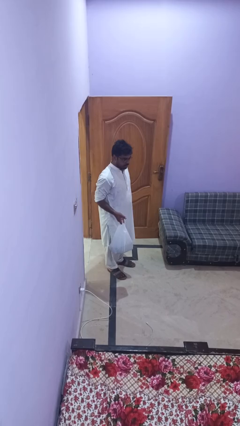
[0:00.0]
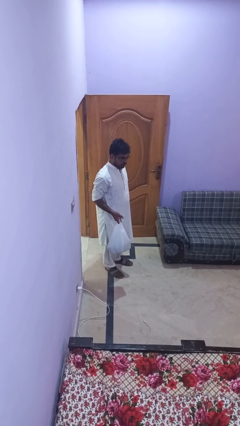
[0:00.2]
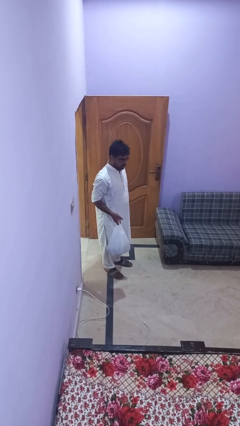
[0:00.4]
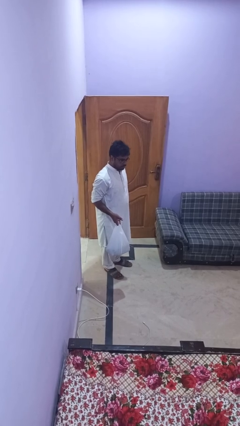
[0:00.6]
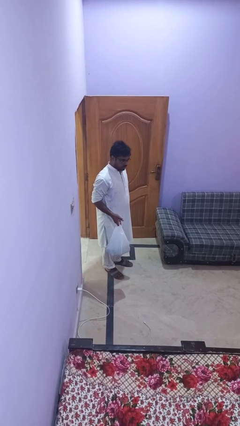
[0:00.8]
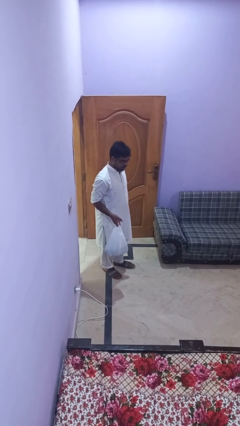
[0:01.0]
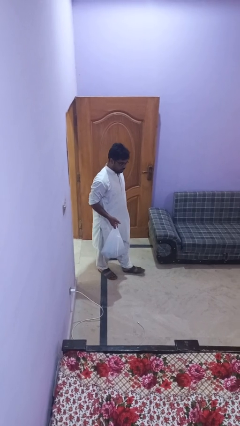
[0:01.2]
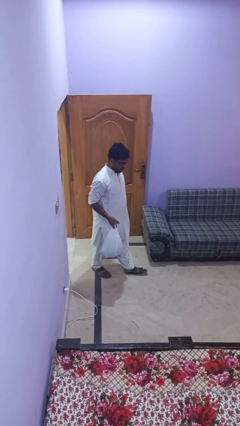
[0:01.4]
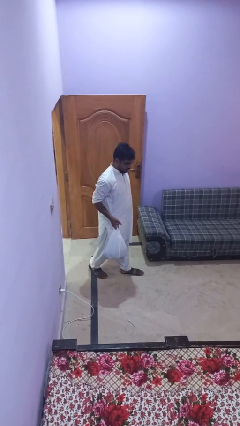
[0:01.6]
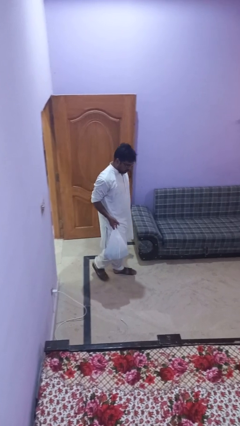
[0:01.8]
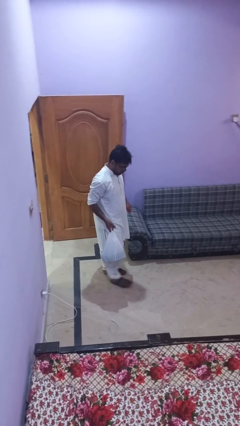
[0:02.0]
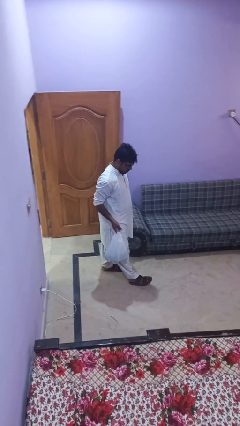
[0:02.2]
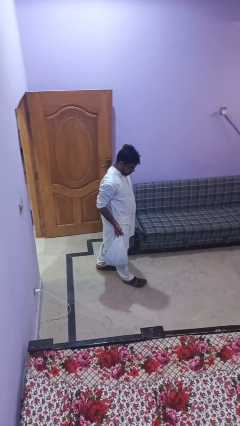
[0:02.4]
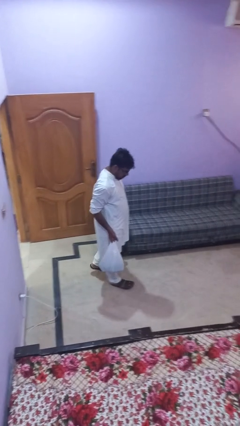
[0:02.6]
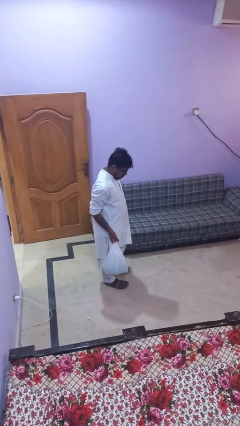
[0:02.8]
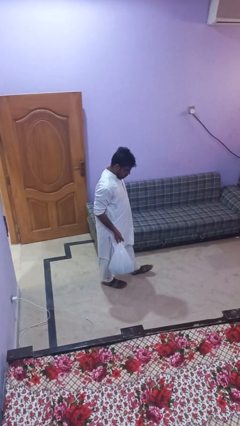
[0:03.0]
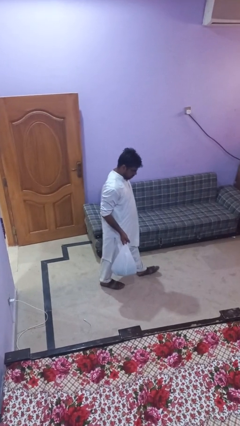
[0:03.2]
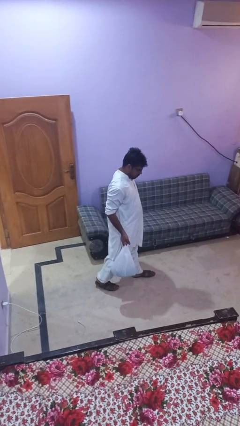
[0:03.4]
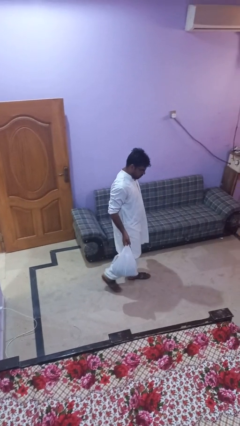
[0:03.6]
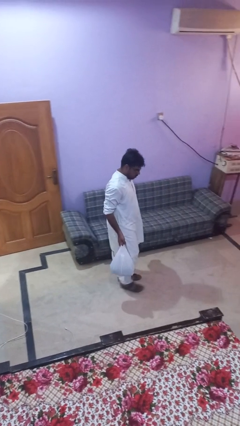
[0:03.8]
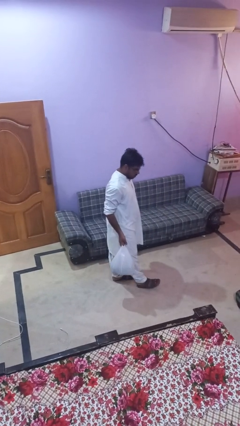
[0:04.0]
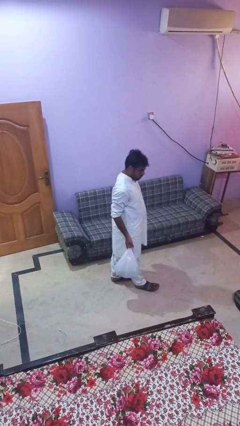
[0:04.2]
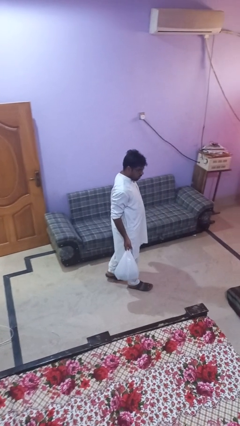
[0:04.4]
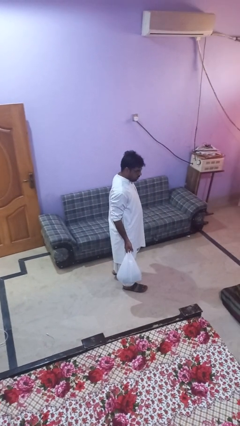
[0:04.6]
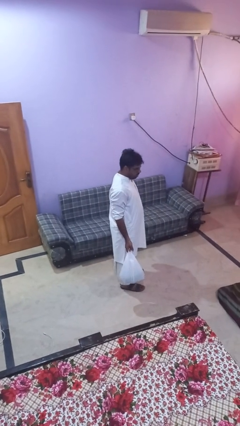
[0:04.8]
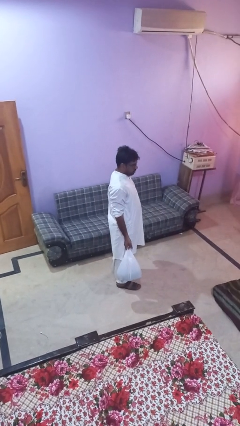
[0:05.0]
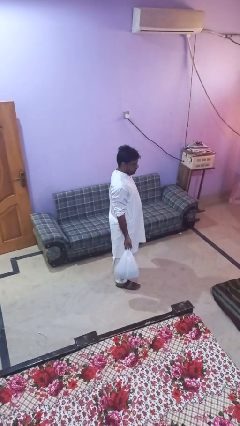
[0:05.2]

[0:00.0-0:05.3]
person carries groceries

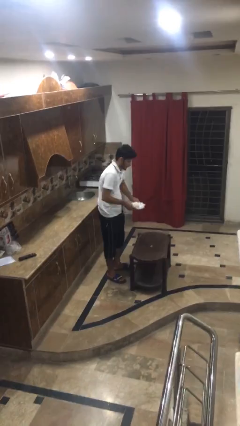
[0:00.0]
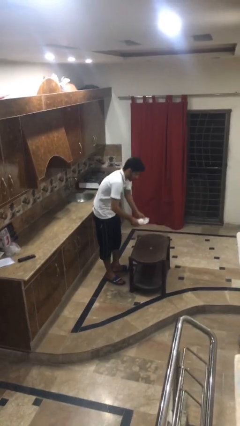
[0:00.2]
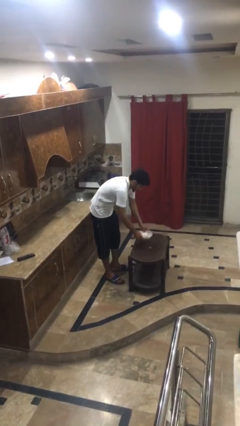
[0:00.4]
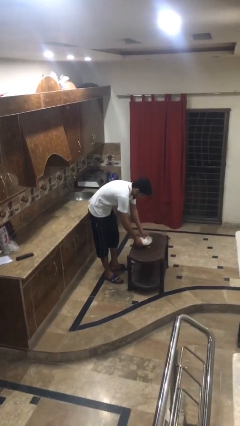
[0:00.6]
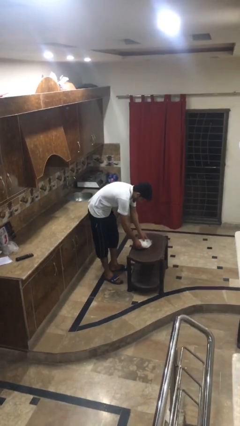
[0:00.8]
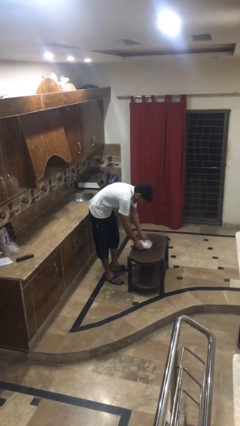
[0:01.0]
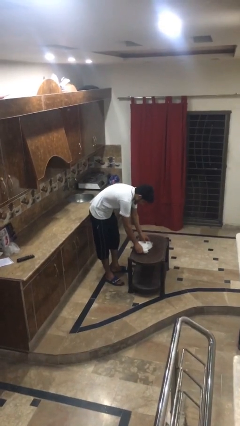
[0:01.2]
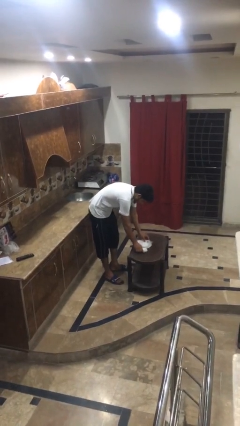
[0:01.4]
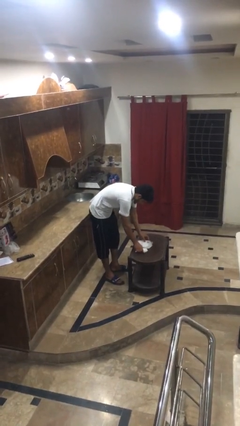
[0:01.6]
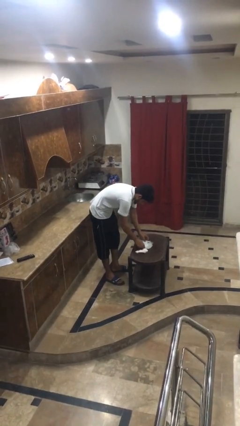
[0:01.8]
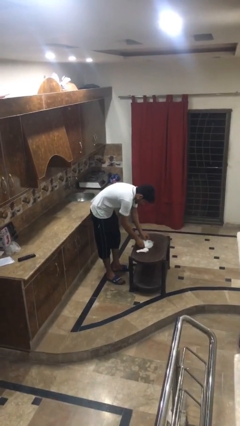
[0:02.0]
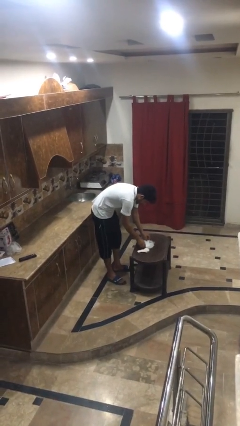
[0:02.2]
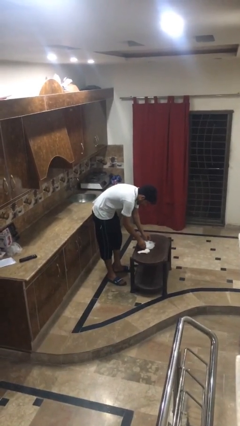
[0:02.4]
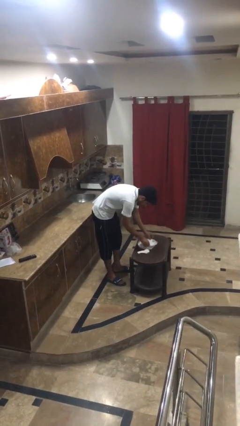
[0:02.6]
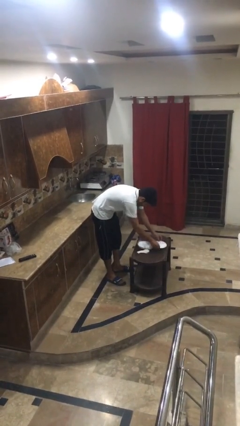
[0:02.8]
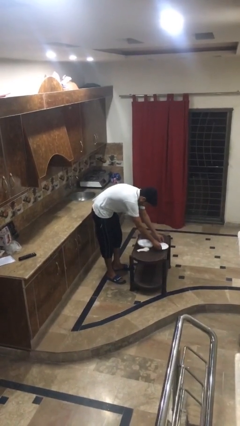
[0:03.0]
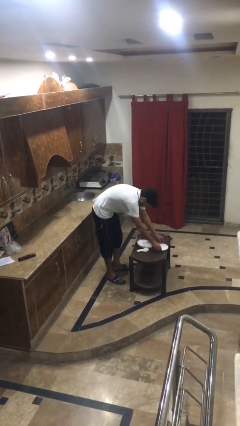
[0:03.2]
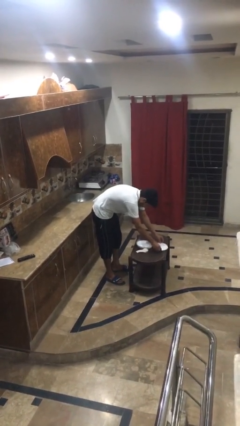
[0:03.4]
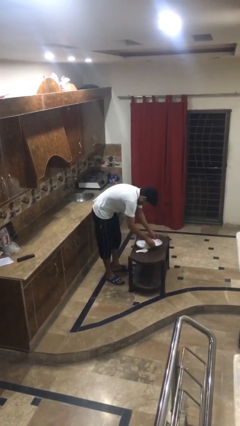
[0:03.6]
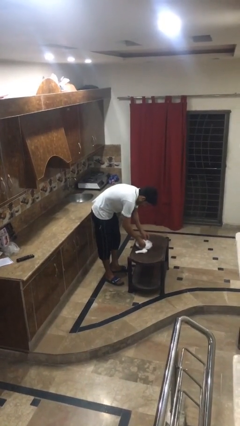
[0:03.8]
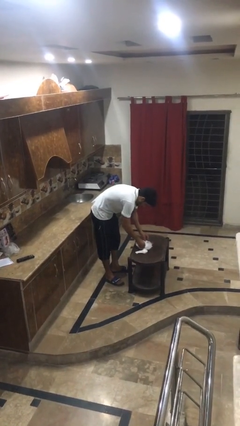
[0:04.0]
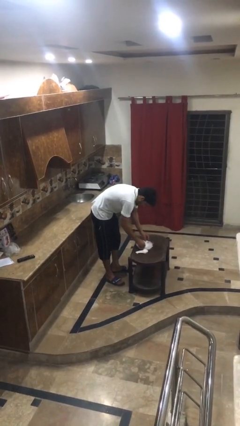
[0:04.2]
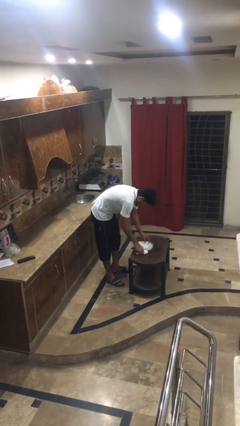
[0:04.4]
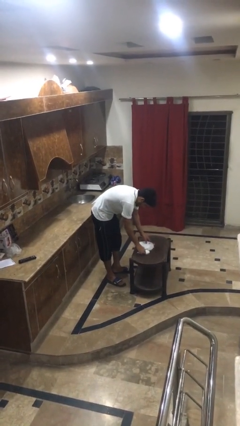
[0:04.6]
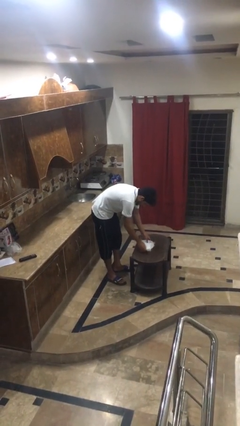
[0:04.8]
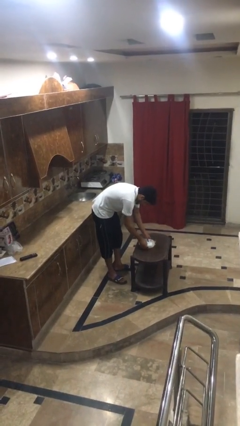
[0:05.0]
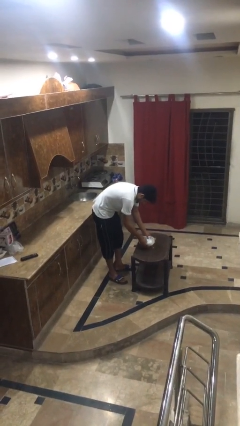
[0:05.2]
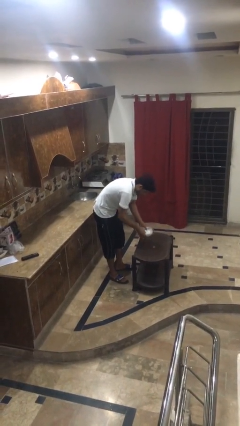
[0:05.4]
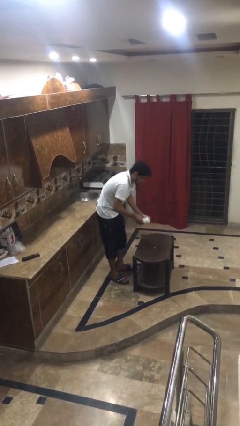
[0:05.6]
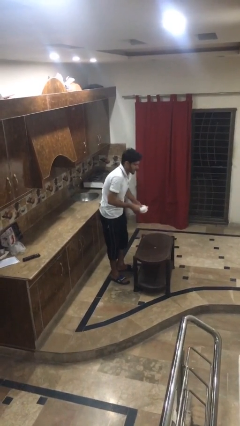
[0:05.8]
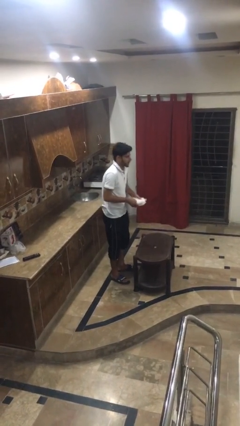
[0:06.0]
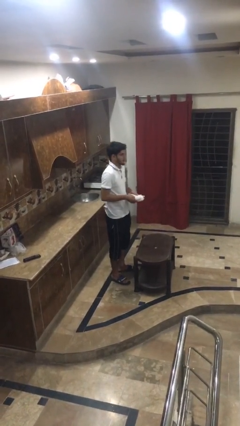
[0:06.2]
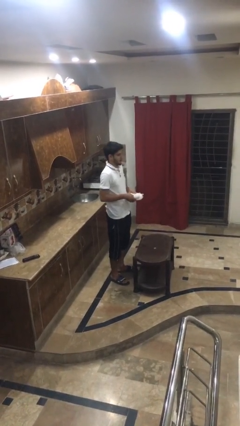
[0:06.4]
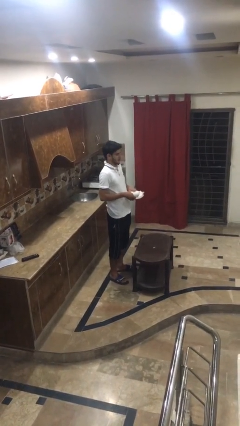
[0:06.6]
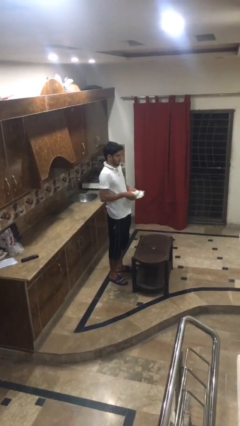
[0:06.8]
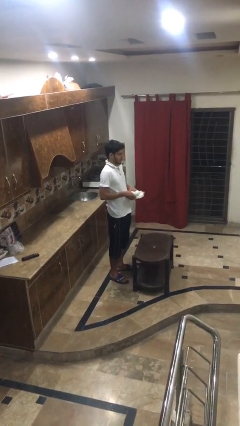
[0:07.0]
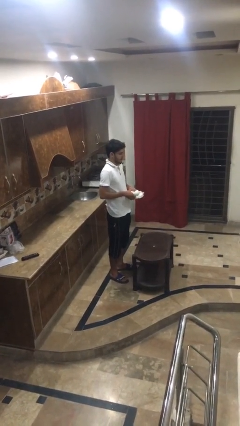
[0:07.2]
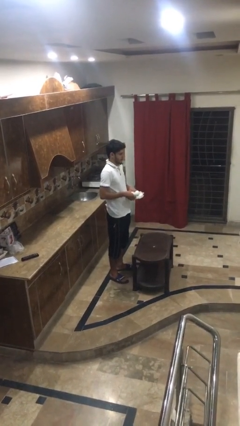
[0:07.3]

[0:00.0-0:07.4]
person sets table

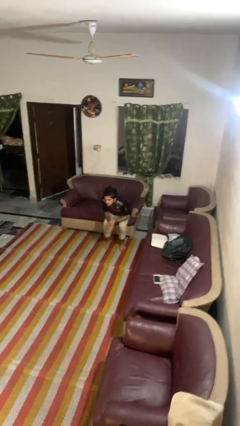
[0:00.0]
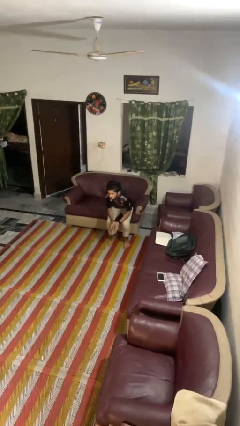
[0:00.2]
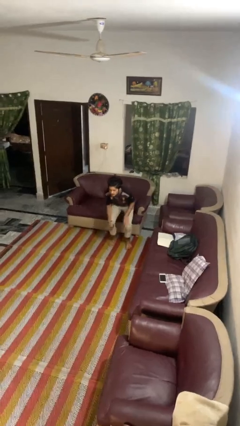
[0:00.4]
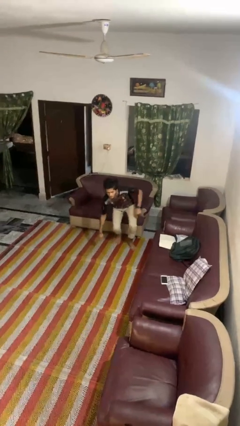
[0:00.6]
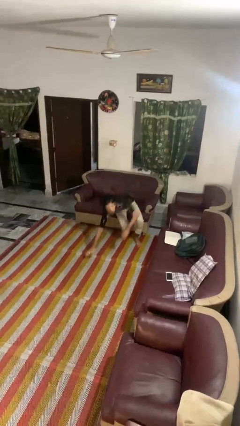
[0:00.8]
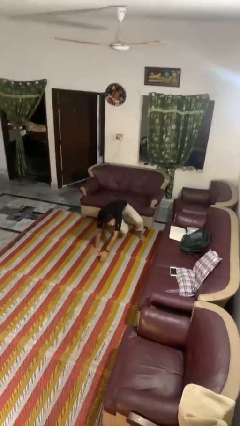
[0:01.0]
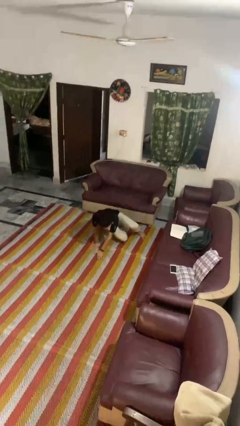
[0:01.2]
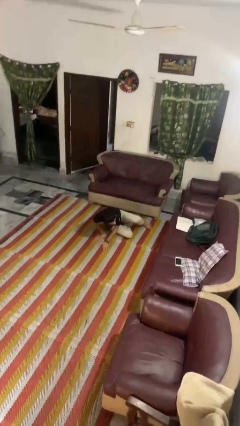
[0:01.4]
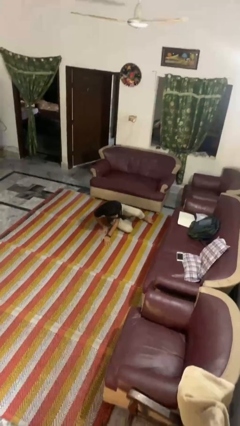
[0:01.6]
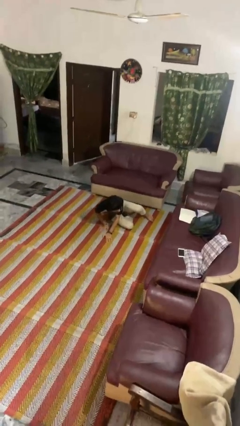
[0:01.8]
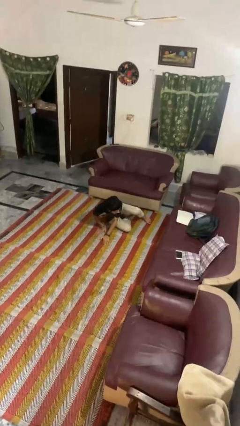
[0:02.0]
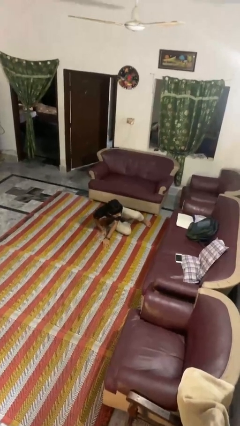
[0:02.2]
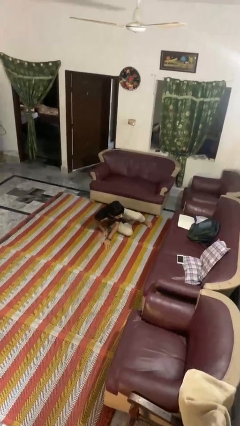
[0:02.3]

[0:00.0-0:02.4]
person falls from chair

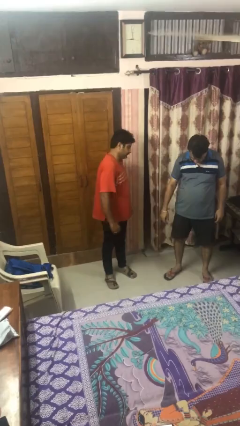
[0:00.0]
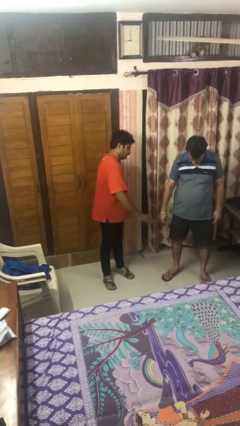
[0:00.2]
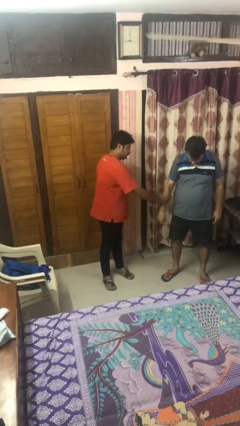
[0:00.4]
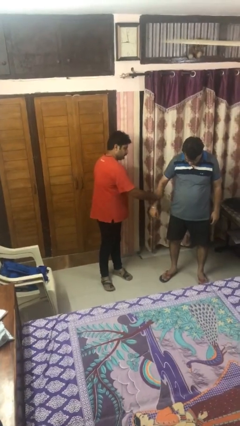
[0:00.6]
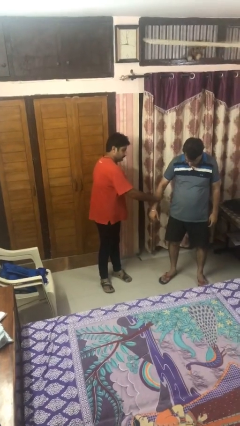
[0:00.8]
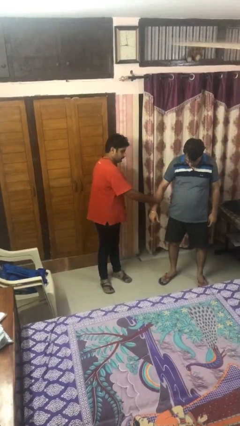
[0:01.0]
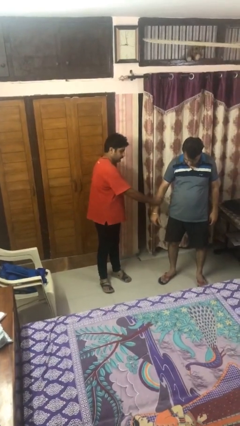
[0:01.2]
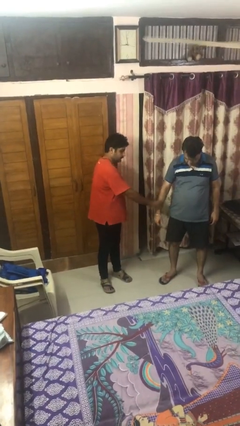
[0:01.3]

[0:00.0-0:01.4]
person grabs person by forearm

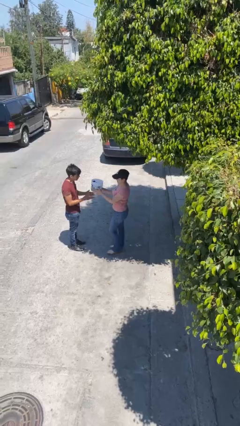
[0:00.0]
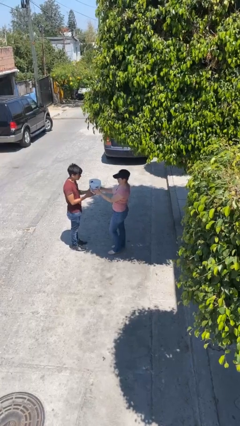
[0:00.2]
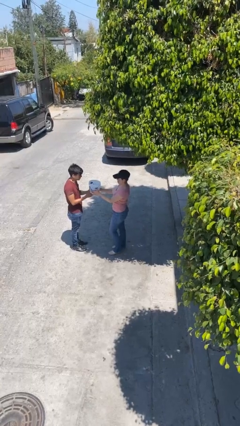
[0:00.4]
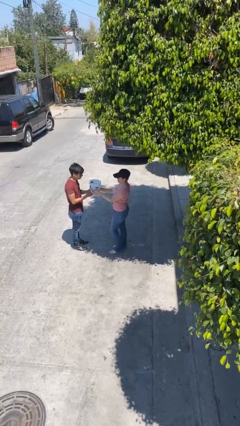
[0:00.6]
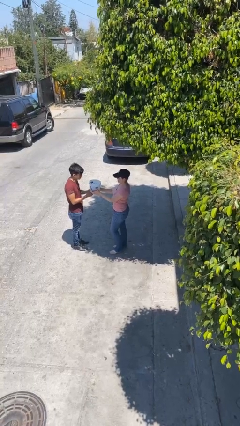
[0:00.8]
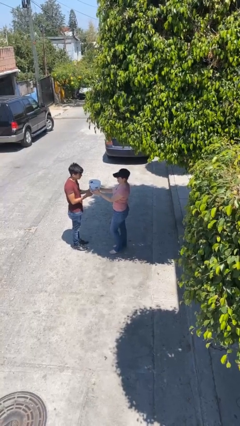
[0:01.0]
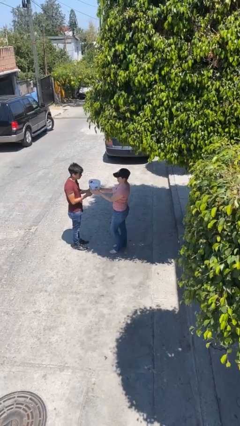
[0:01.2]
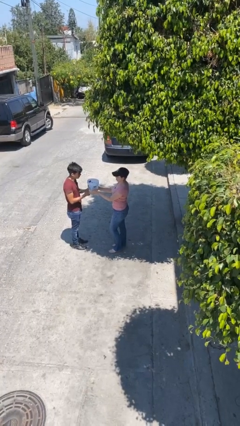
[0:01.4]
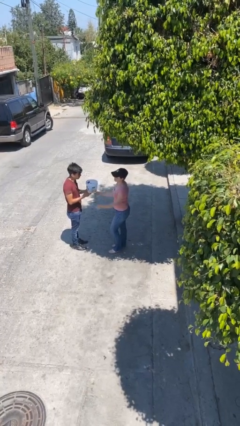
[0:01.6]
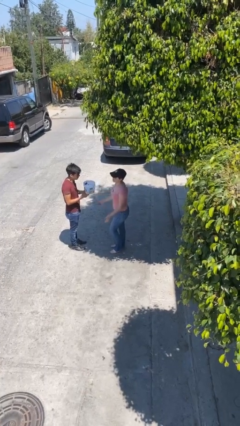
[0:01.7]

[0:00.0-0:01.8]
person transfers object to person
